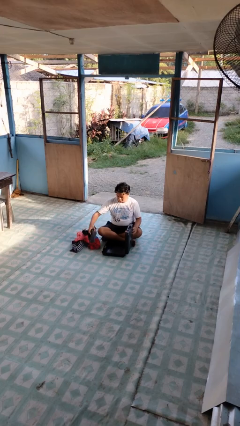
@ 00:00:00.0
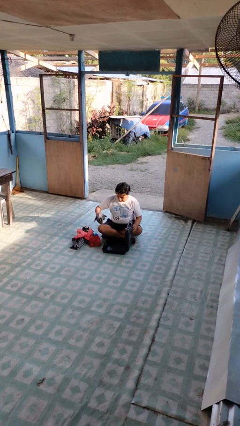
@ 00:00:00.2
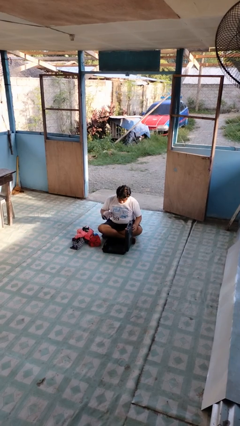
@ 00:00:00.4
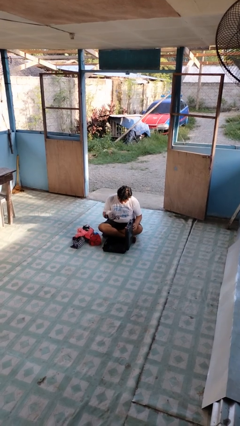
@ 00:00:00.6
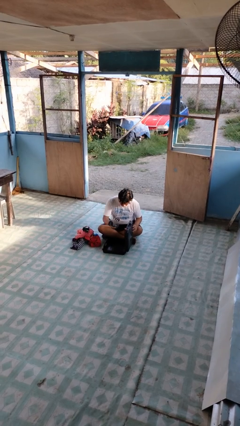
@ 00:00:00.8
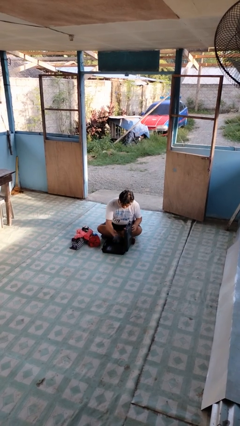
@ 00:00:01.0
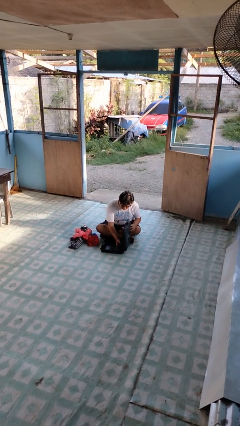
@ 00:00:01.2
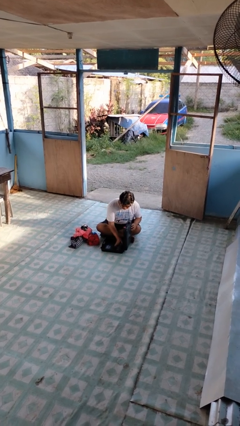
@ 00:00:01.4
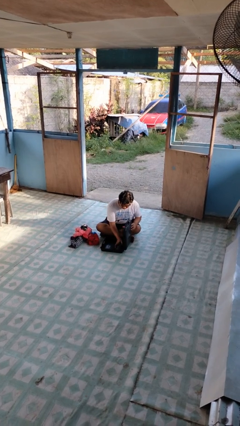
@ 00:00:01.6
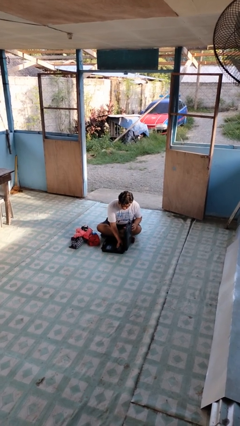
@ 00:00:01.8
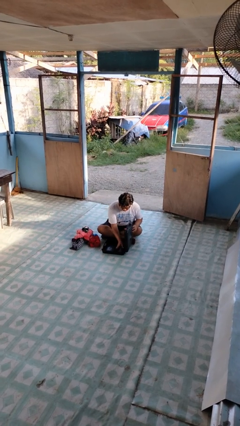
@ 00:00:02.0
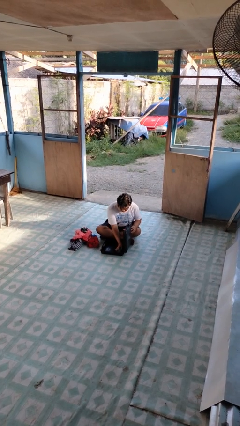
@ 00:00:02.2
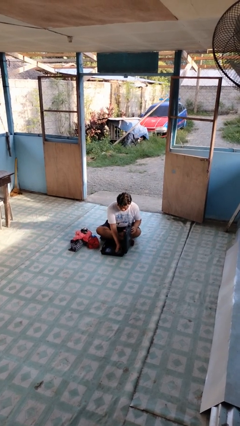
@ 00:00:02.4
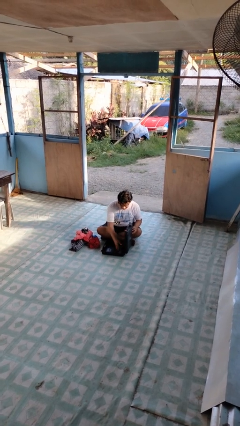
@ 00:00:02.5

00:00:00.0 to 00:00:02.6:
person loads clothes into suitcase

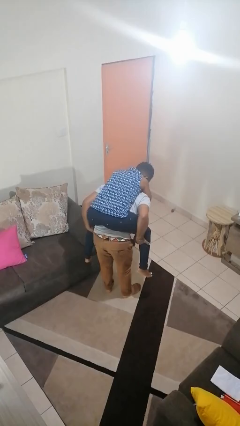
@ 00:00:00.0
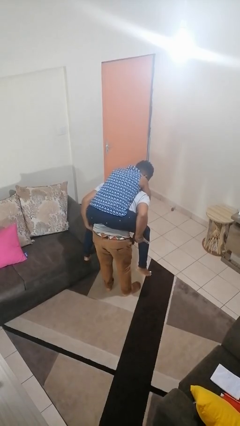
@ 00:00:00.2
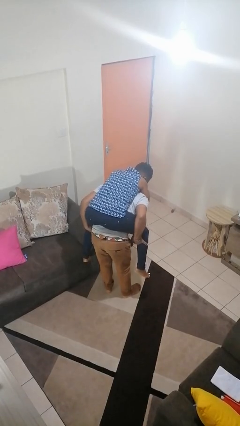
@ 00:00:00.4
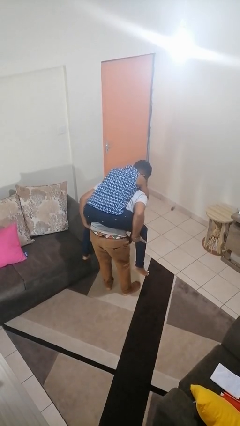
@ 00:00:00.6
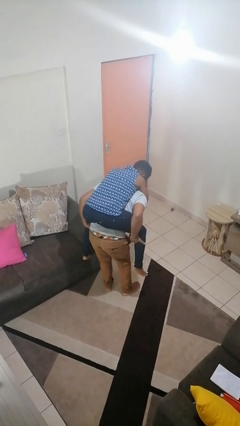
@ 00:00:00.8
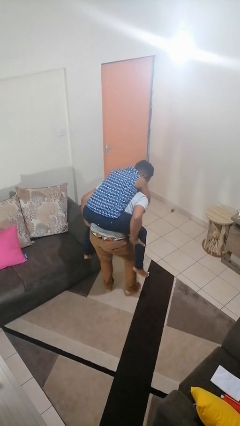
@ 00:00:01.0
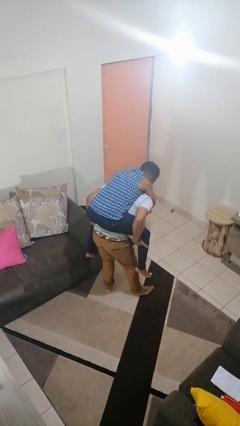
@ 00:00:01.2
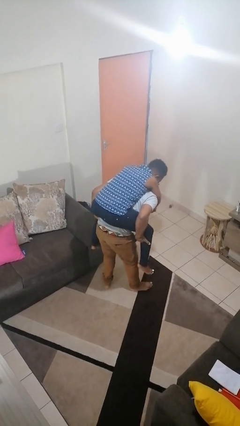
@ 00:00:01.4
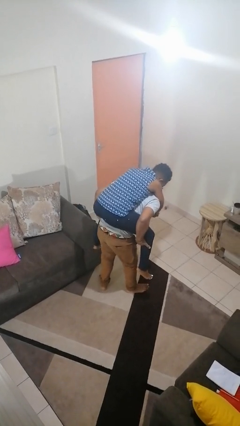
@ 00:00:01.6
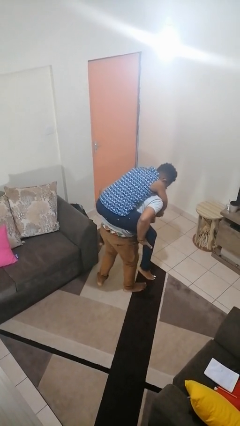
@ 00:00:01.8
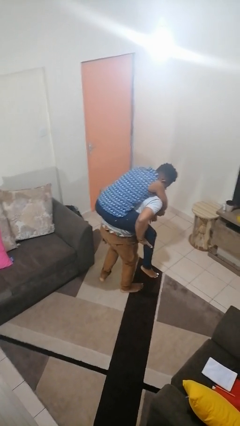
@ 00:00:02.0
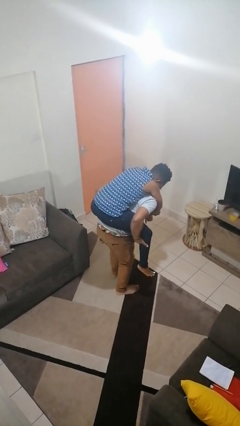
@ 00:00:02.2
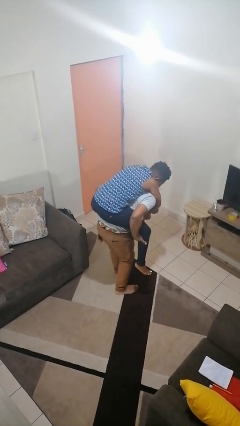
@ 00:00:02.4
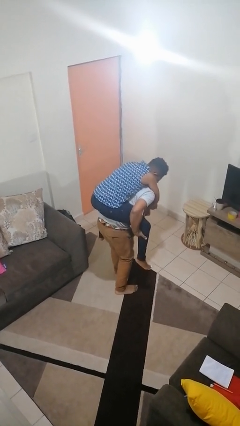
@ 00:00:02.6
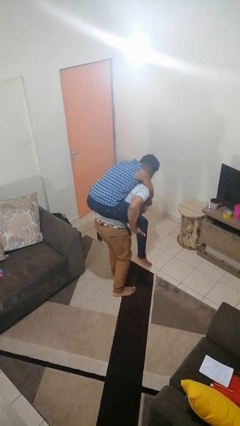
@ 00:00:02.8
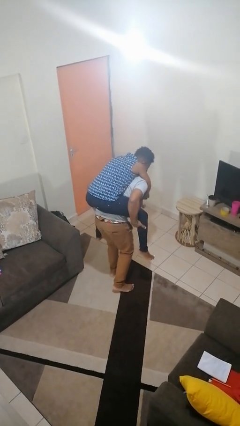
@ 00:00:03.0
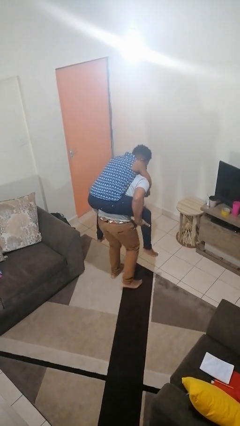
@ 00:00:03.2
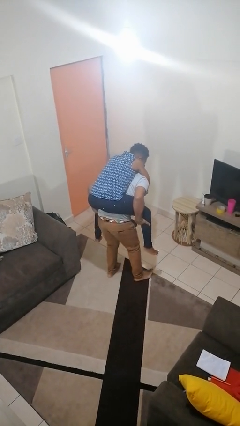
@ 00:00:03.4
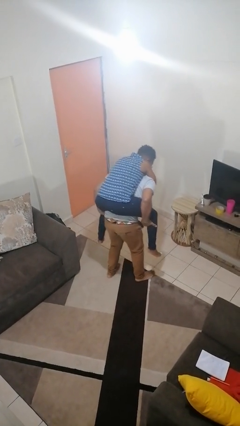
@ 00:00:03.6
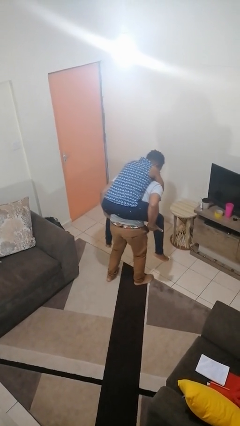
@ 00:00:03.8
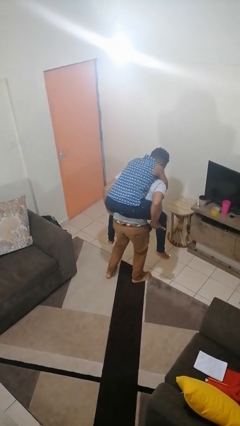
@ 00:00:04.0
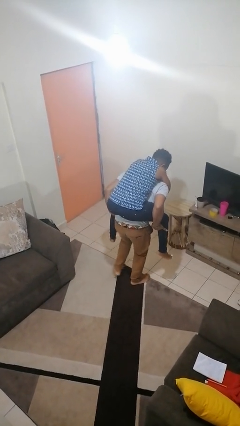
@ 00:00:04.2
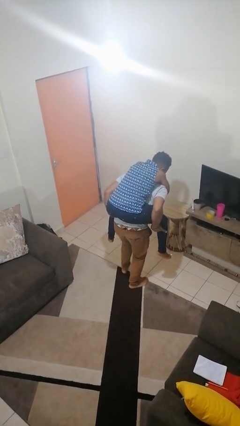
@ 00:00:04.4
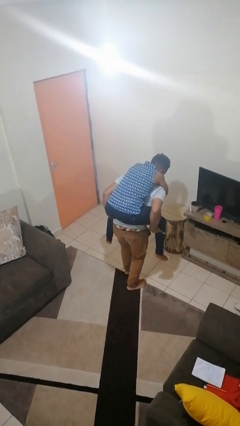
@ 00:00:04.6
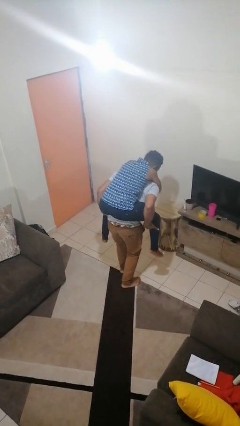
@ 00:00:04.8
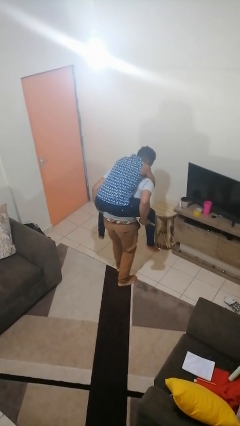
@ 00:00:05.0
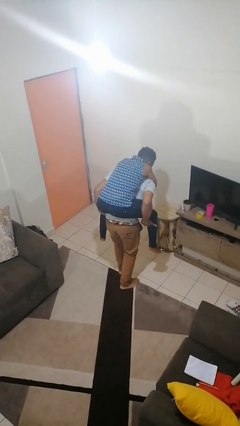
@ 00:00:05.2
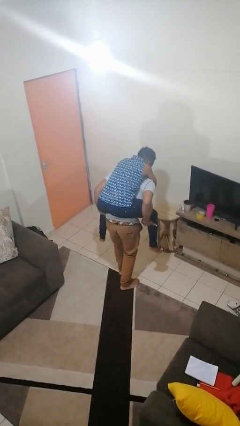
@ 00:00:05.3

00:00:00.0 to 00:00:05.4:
person carries person on back

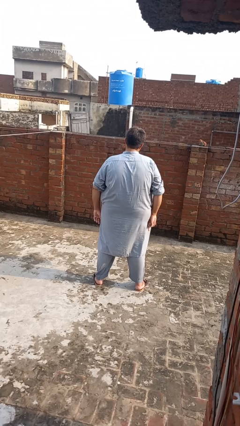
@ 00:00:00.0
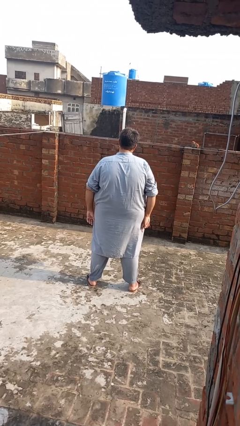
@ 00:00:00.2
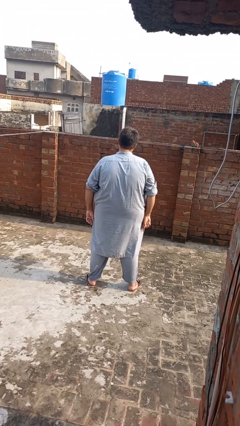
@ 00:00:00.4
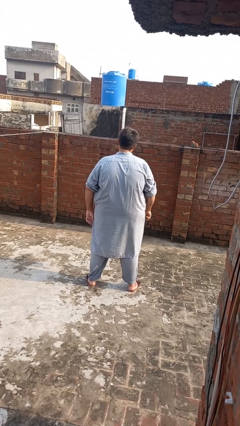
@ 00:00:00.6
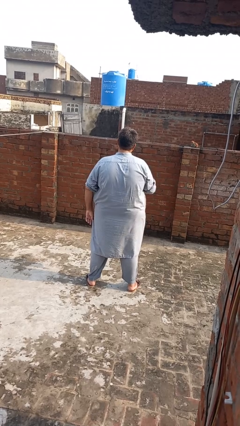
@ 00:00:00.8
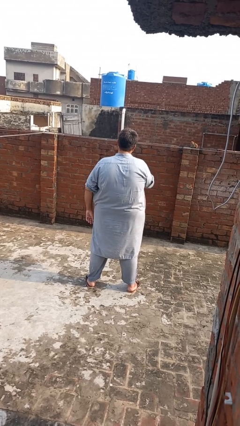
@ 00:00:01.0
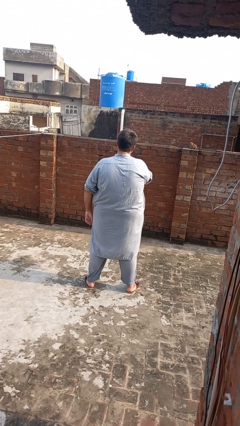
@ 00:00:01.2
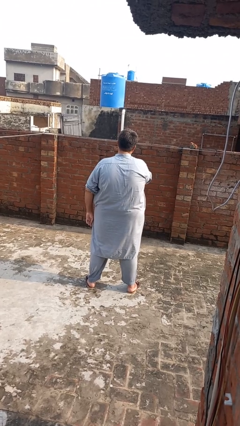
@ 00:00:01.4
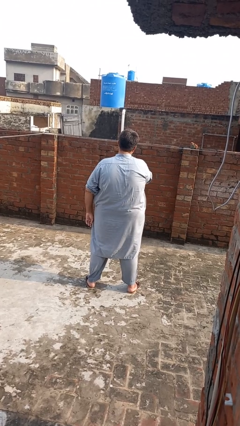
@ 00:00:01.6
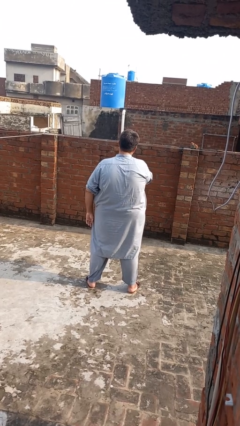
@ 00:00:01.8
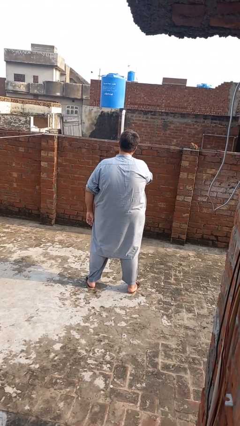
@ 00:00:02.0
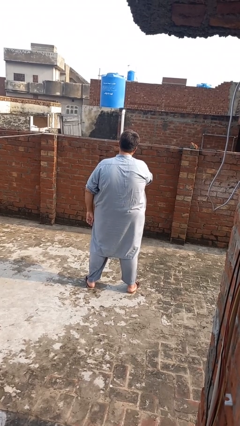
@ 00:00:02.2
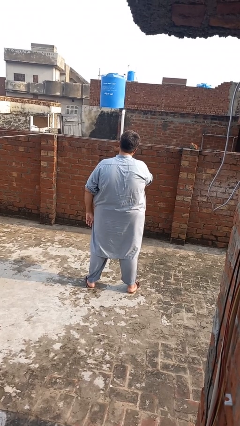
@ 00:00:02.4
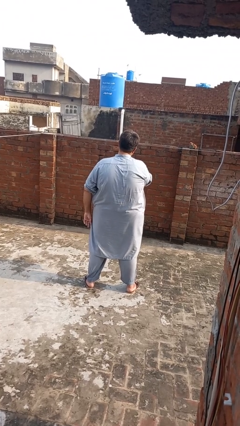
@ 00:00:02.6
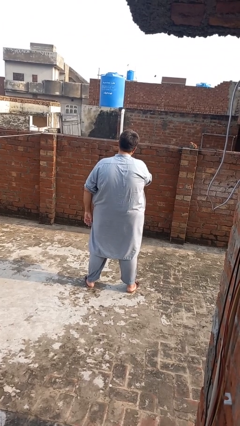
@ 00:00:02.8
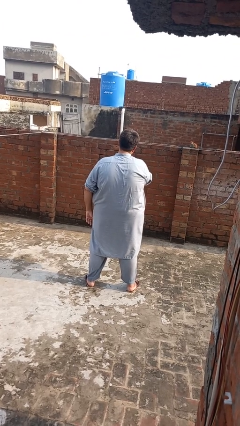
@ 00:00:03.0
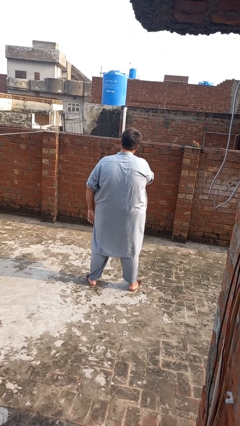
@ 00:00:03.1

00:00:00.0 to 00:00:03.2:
person gestures be quiet

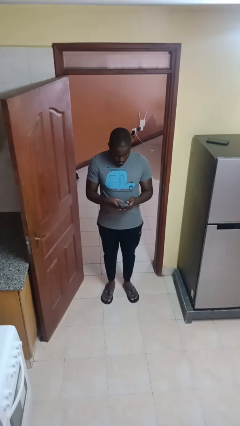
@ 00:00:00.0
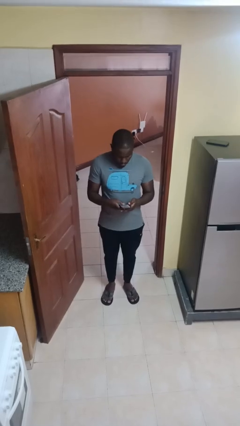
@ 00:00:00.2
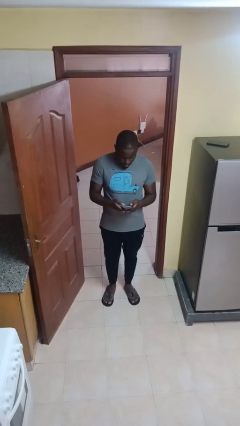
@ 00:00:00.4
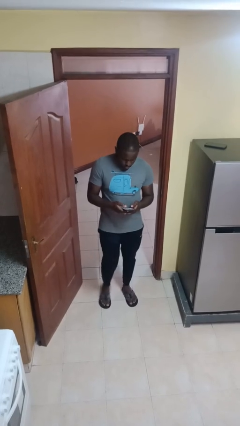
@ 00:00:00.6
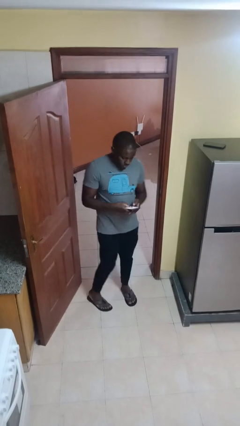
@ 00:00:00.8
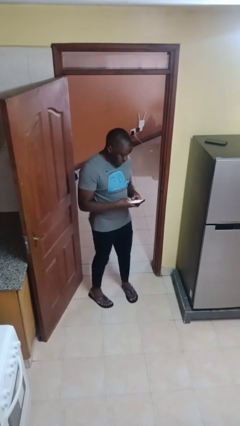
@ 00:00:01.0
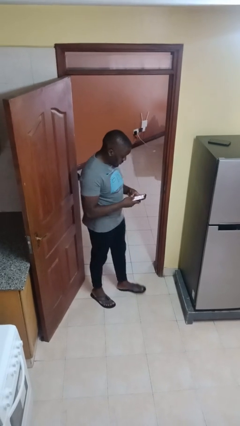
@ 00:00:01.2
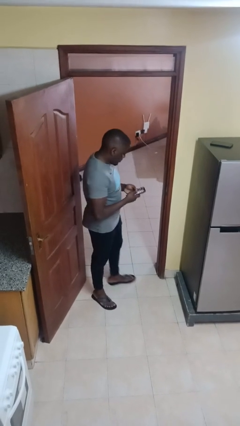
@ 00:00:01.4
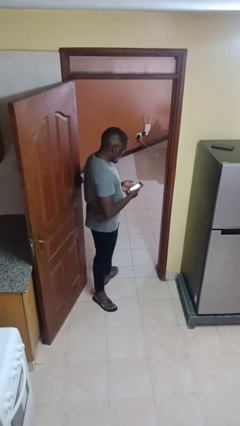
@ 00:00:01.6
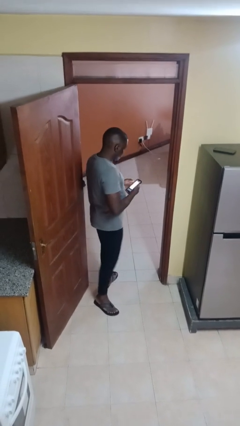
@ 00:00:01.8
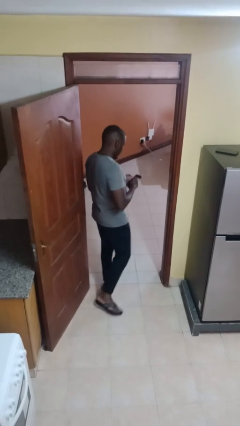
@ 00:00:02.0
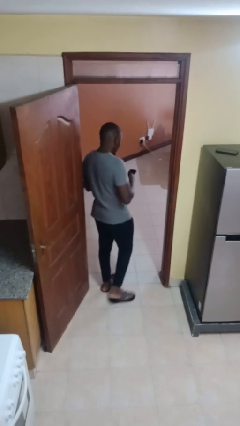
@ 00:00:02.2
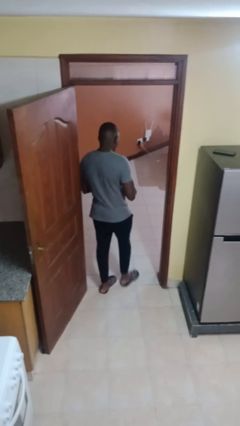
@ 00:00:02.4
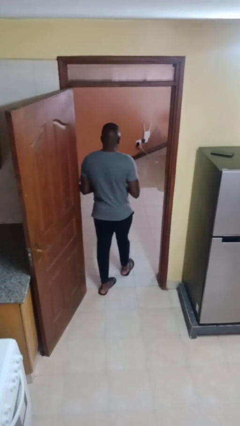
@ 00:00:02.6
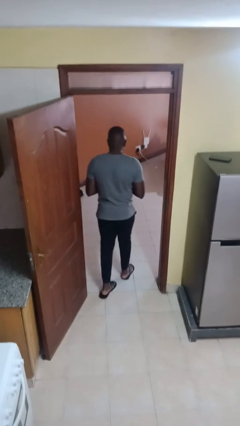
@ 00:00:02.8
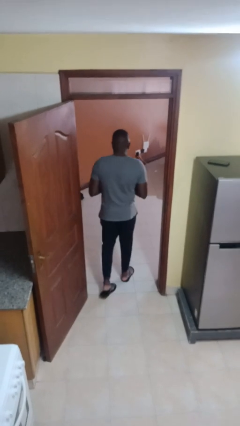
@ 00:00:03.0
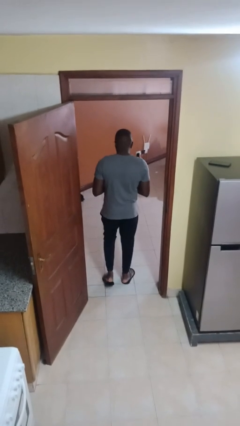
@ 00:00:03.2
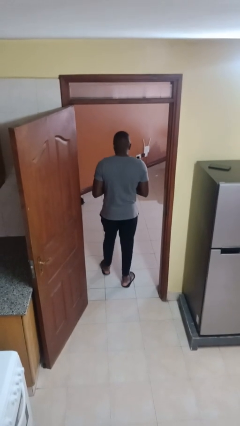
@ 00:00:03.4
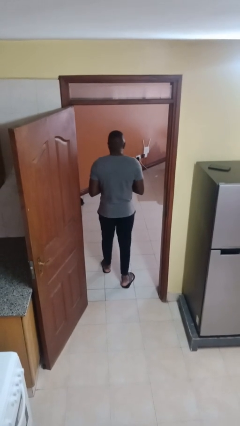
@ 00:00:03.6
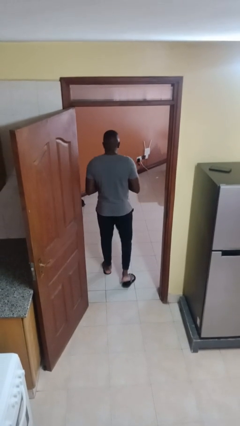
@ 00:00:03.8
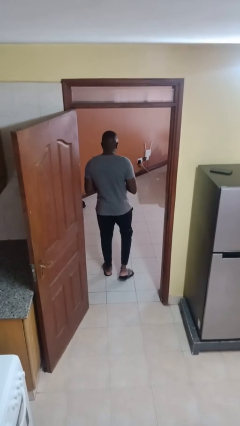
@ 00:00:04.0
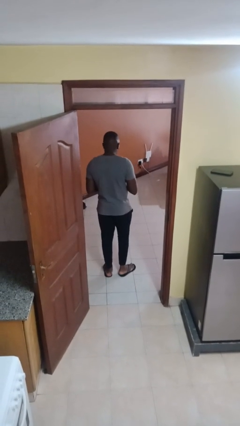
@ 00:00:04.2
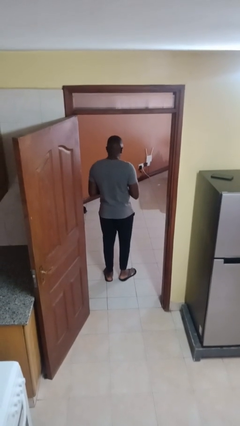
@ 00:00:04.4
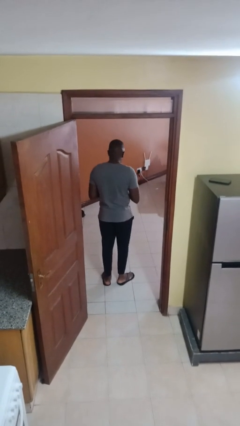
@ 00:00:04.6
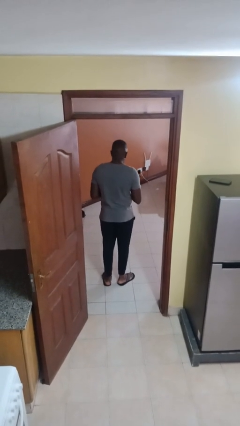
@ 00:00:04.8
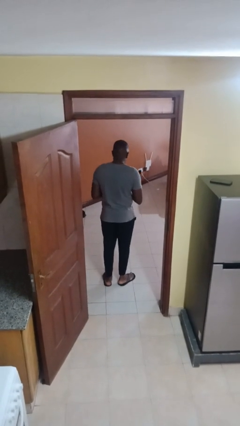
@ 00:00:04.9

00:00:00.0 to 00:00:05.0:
person exits scene through structure

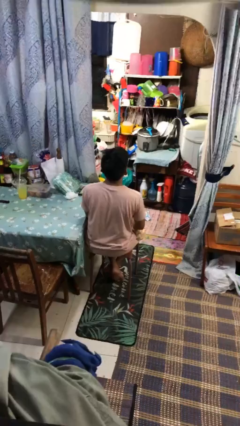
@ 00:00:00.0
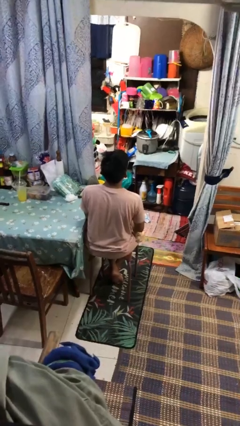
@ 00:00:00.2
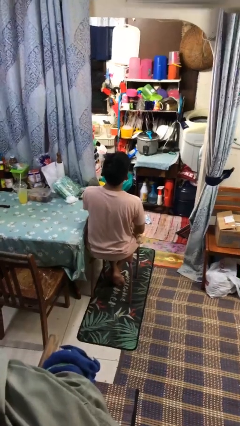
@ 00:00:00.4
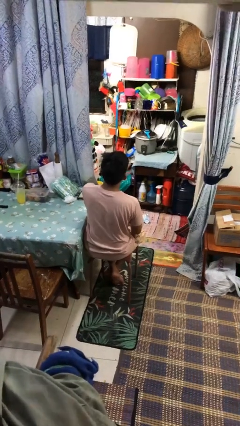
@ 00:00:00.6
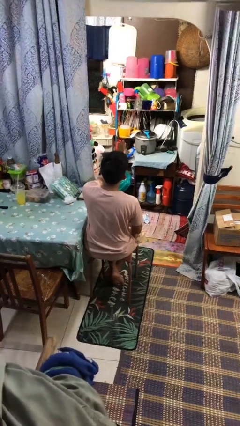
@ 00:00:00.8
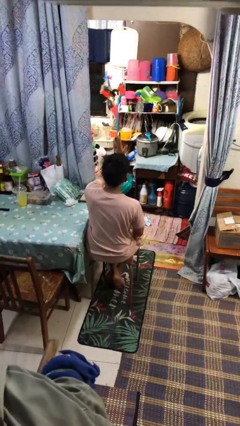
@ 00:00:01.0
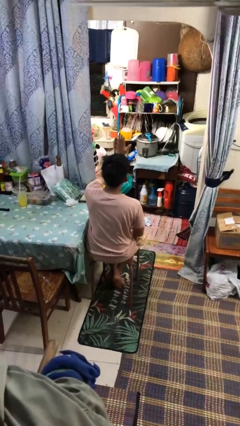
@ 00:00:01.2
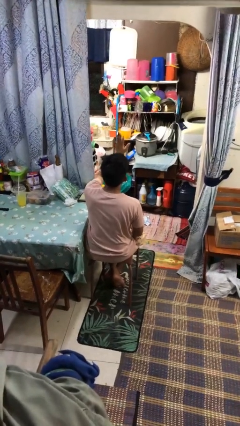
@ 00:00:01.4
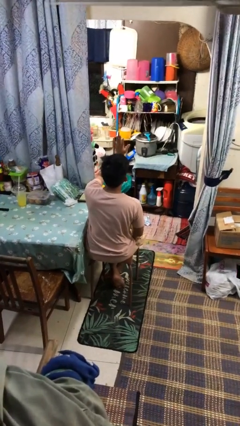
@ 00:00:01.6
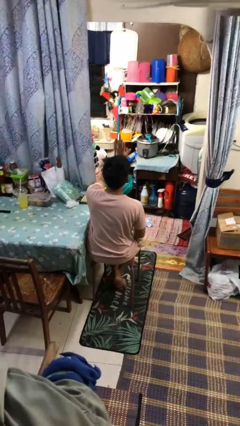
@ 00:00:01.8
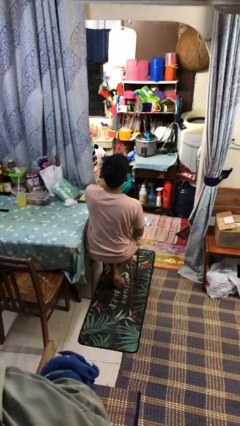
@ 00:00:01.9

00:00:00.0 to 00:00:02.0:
person gestures stop
